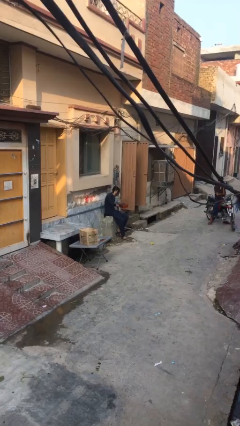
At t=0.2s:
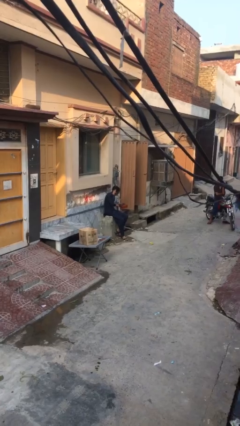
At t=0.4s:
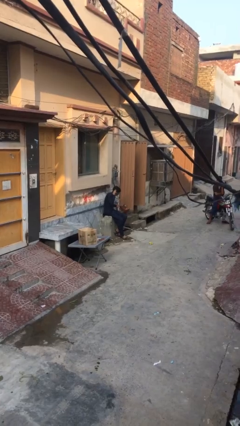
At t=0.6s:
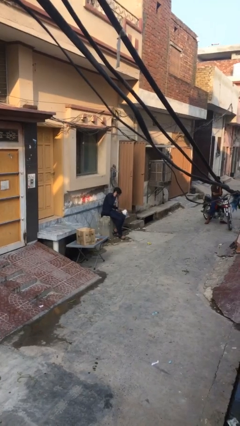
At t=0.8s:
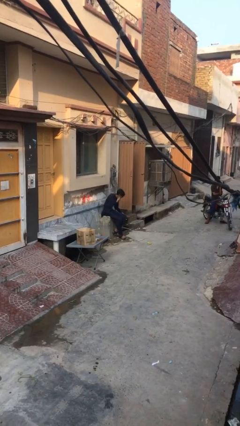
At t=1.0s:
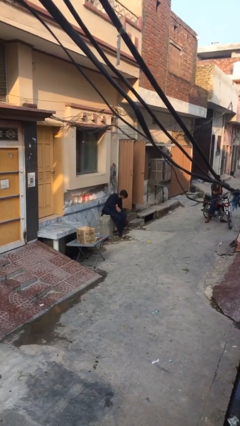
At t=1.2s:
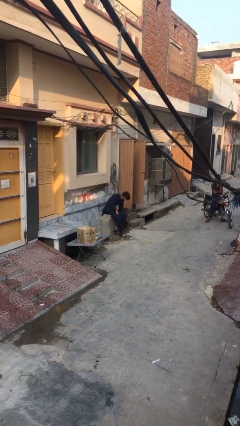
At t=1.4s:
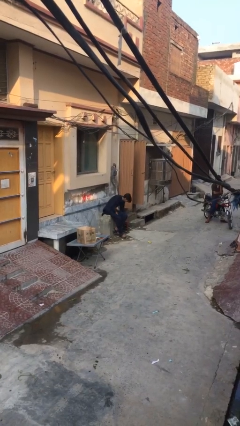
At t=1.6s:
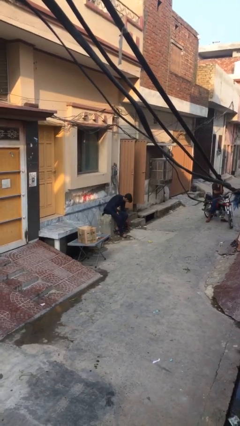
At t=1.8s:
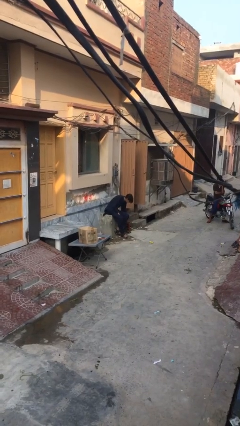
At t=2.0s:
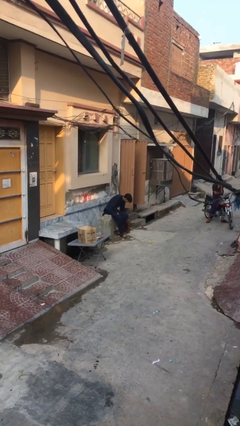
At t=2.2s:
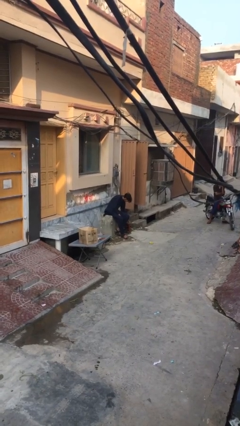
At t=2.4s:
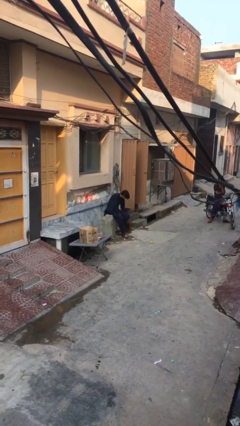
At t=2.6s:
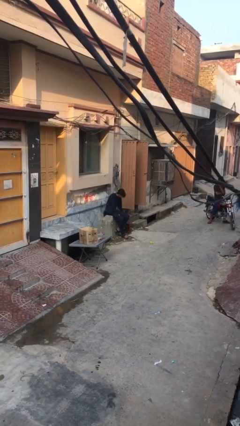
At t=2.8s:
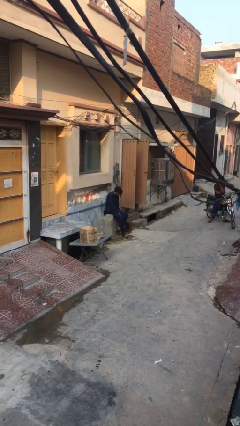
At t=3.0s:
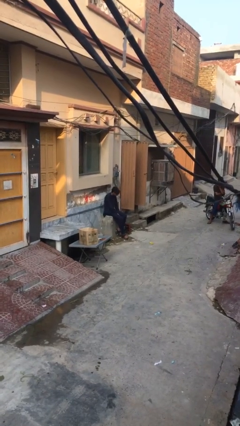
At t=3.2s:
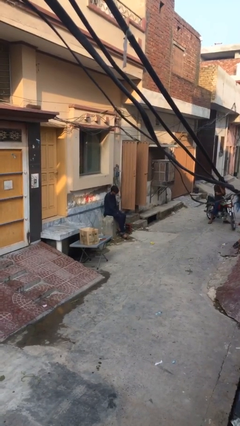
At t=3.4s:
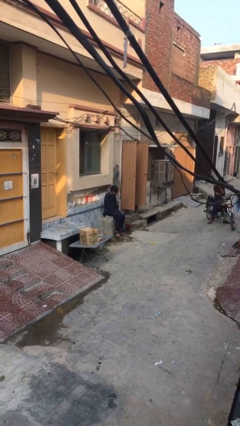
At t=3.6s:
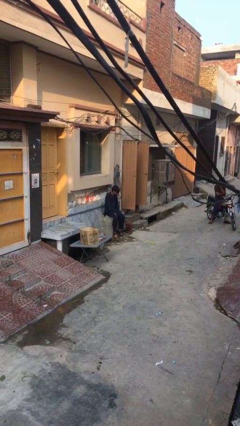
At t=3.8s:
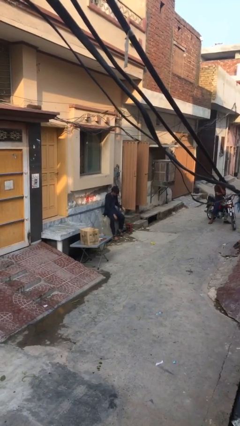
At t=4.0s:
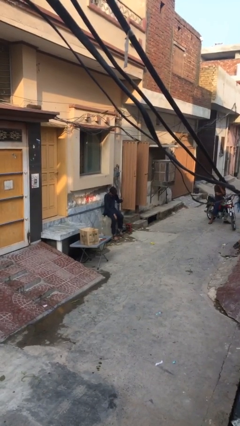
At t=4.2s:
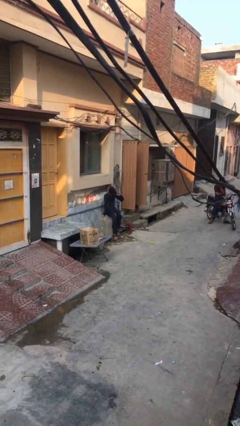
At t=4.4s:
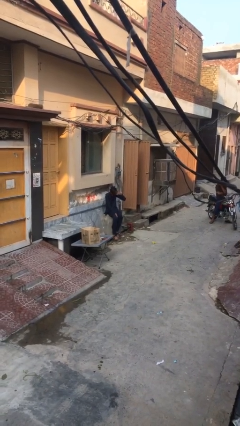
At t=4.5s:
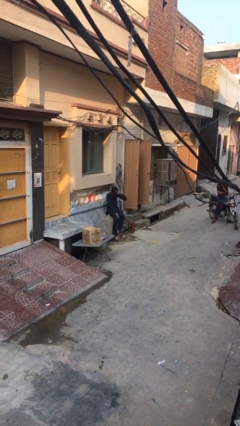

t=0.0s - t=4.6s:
person puts down object on floor

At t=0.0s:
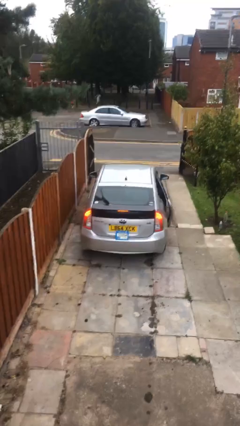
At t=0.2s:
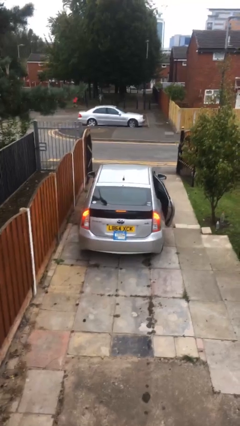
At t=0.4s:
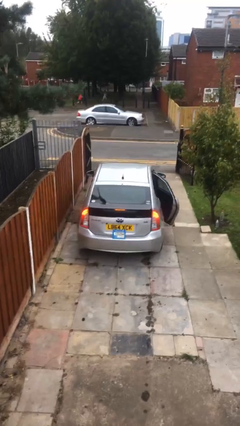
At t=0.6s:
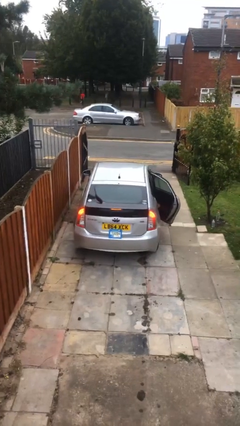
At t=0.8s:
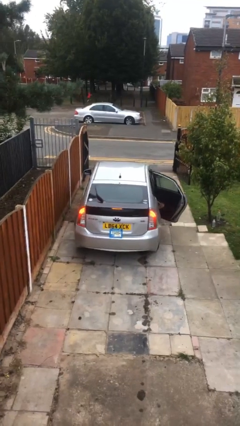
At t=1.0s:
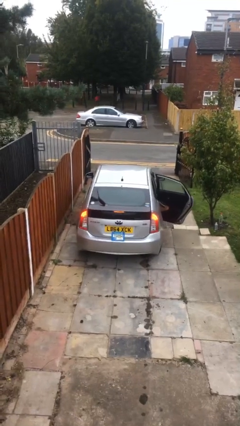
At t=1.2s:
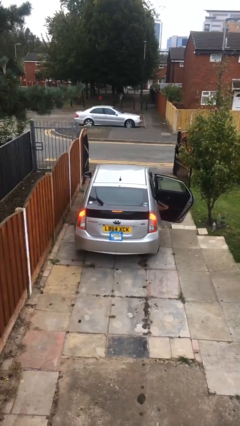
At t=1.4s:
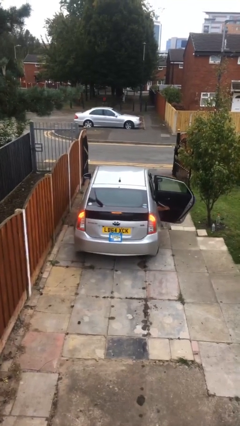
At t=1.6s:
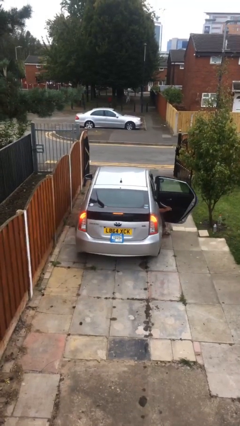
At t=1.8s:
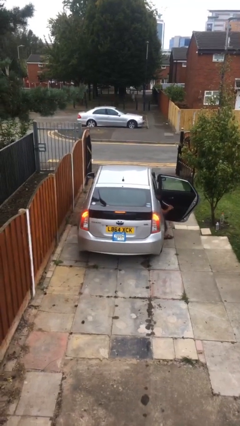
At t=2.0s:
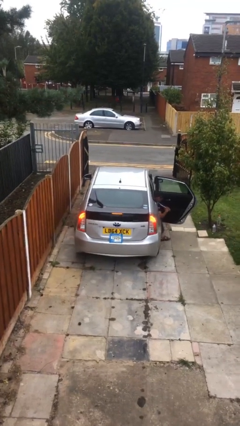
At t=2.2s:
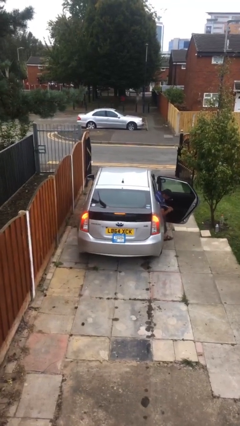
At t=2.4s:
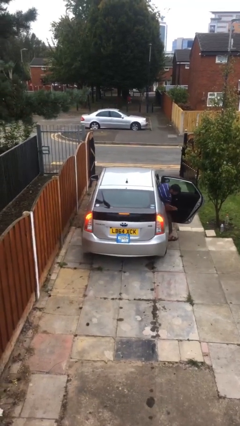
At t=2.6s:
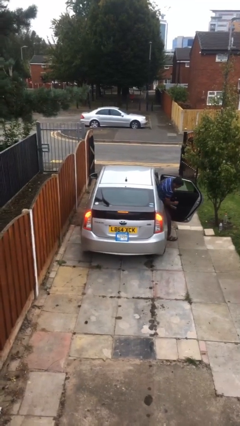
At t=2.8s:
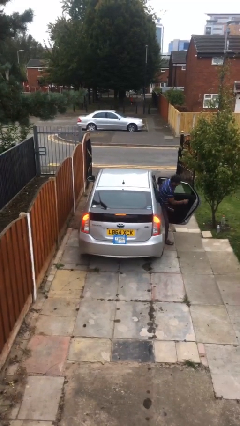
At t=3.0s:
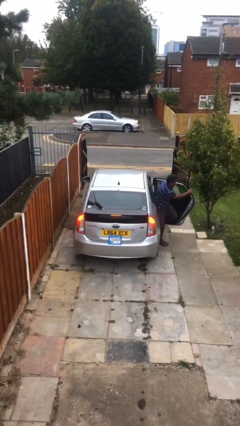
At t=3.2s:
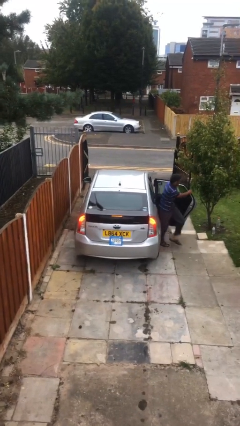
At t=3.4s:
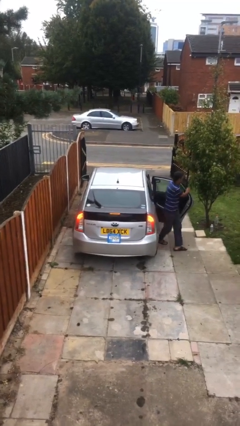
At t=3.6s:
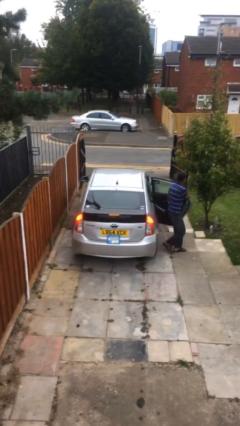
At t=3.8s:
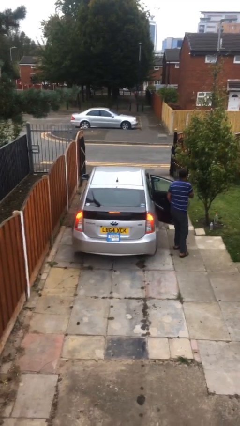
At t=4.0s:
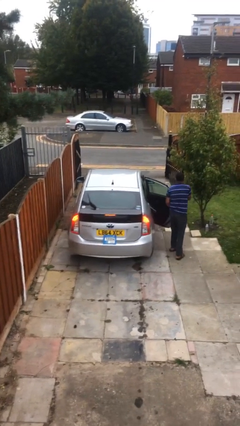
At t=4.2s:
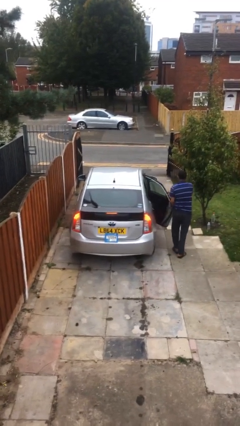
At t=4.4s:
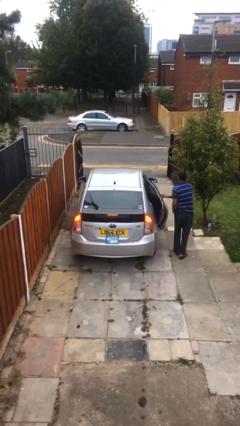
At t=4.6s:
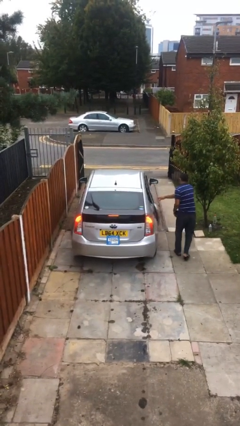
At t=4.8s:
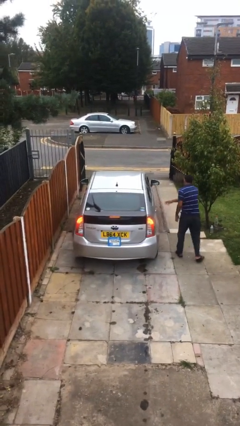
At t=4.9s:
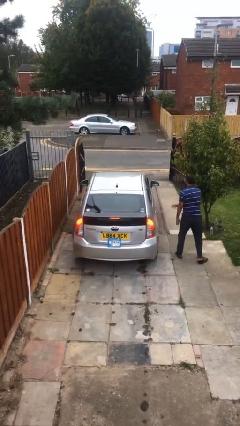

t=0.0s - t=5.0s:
car drops off person

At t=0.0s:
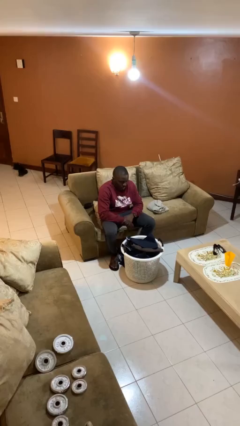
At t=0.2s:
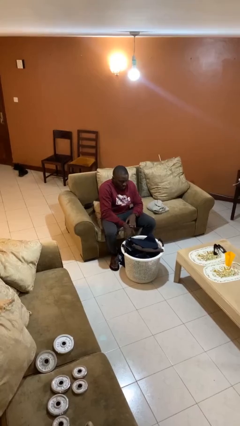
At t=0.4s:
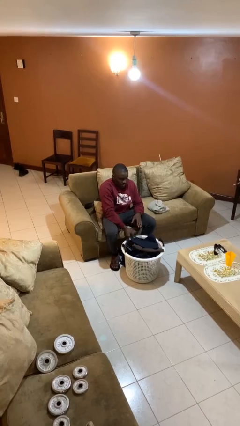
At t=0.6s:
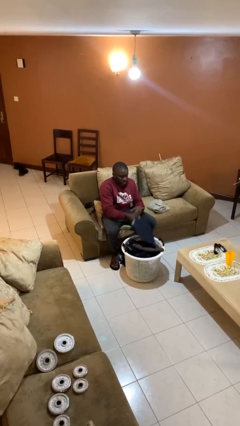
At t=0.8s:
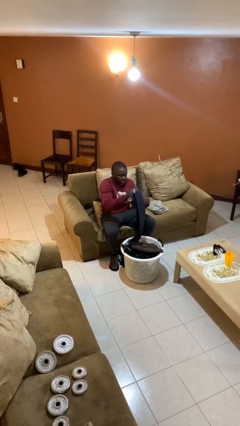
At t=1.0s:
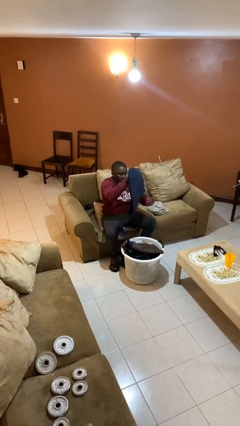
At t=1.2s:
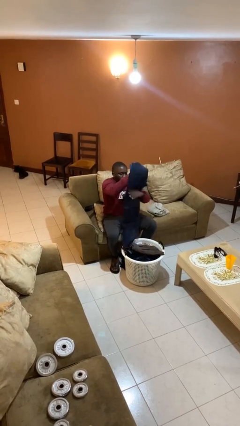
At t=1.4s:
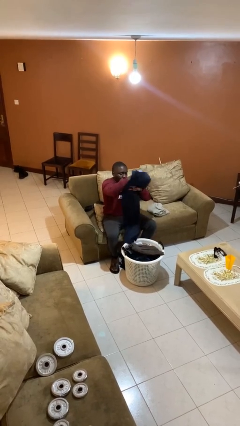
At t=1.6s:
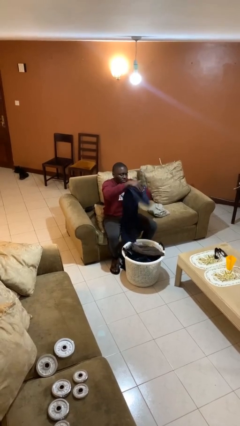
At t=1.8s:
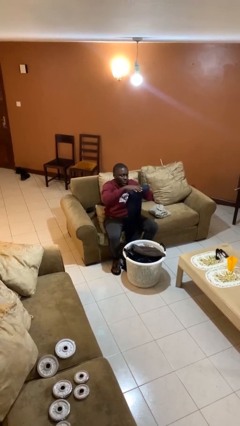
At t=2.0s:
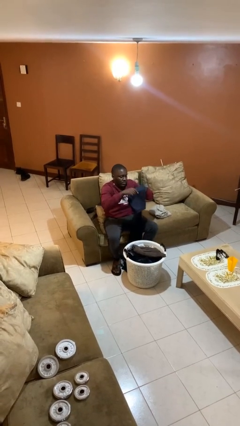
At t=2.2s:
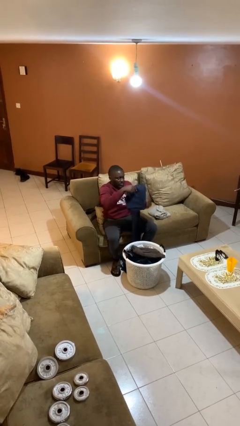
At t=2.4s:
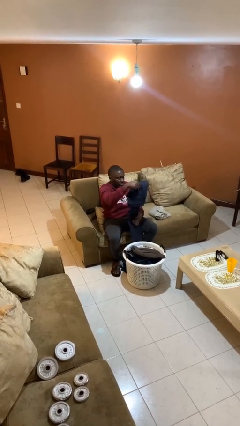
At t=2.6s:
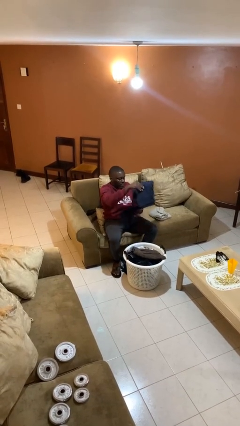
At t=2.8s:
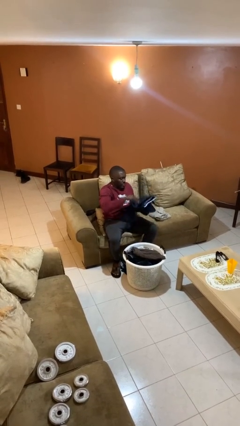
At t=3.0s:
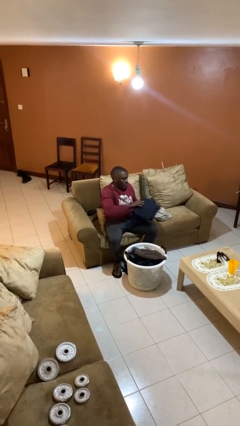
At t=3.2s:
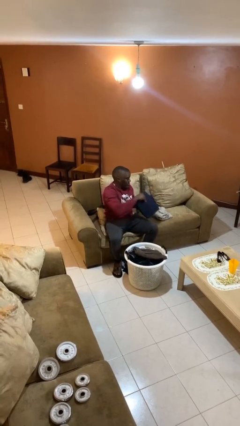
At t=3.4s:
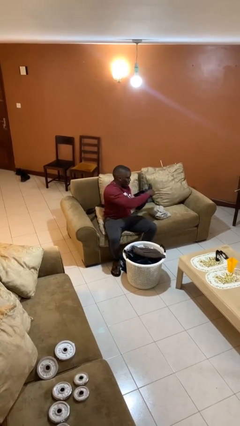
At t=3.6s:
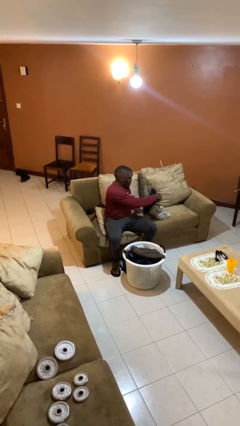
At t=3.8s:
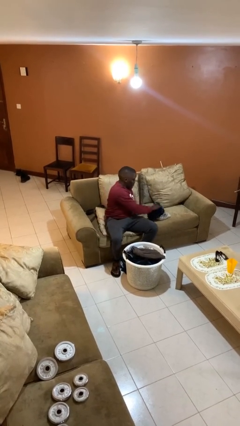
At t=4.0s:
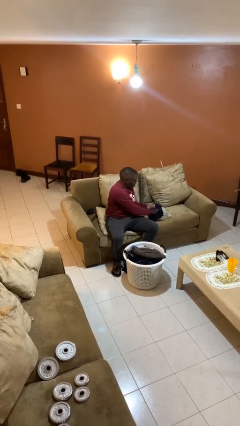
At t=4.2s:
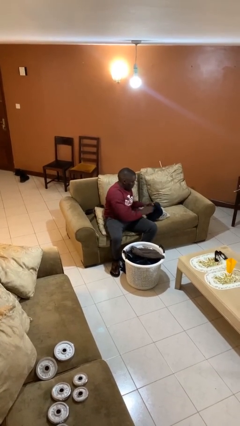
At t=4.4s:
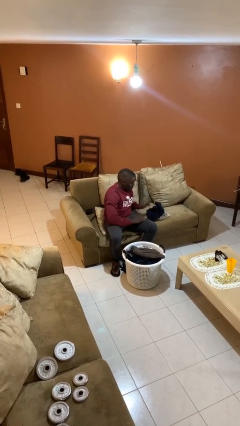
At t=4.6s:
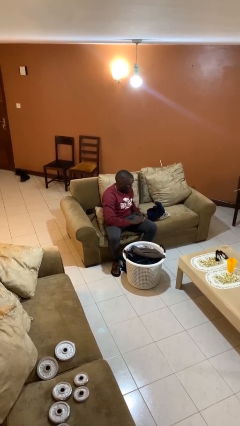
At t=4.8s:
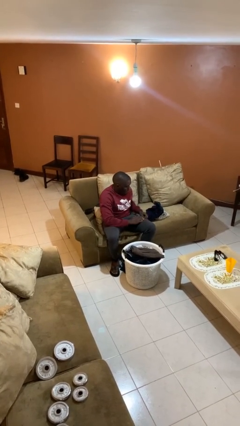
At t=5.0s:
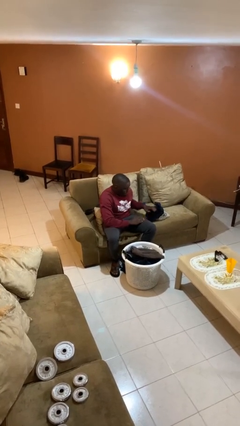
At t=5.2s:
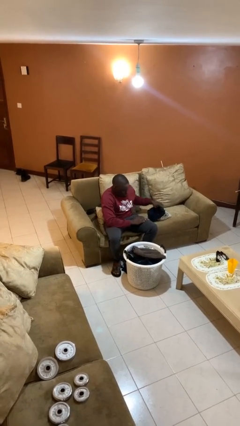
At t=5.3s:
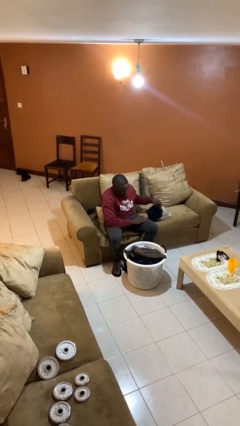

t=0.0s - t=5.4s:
person folds pants

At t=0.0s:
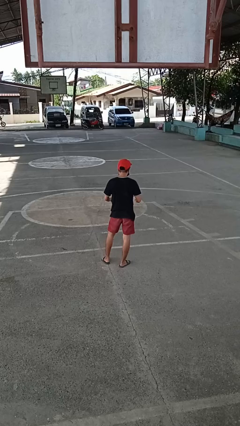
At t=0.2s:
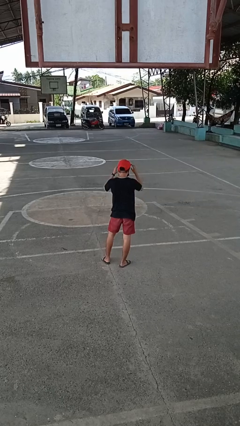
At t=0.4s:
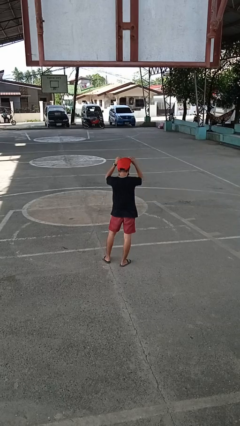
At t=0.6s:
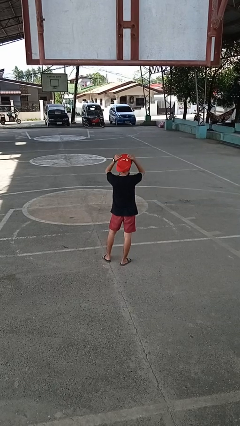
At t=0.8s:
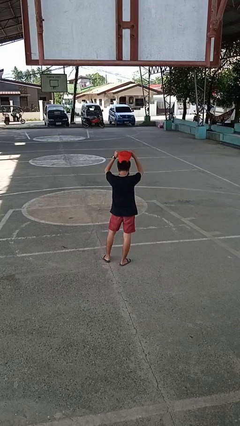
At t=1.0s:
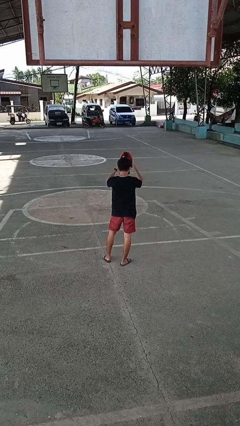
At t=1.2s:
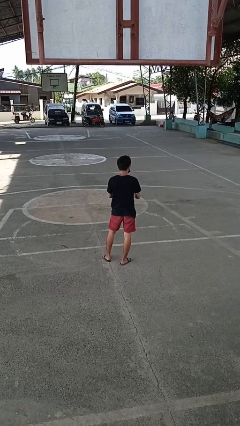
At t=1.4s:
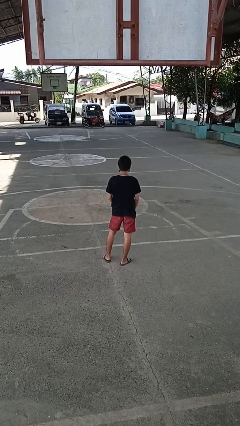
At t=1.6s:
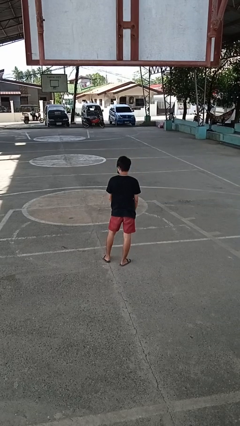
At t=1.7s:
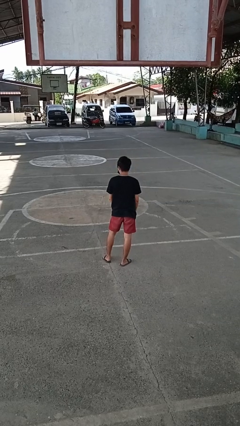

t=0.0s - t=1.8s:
person takes off hat

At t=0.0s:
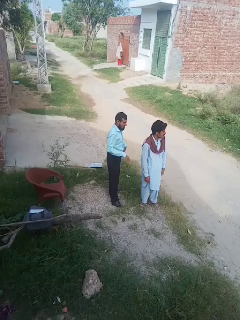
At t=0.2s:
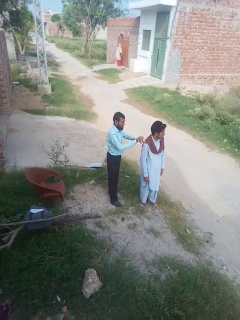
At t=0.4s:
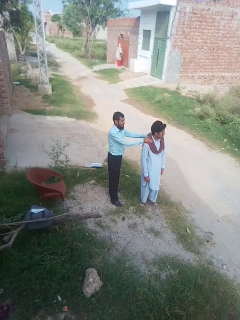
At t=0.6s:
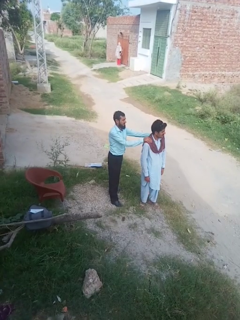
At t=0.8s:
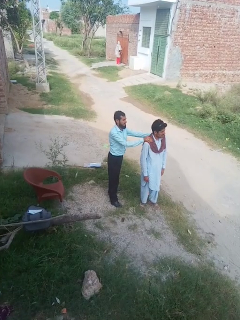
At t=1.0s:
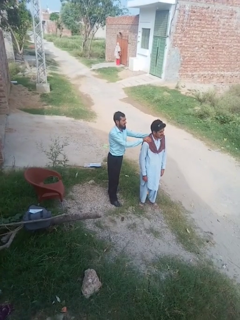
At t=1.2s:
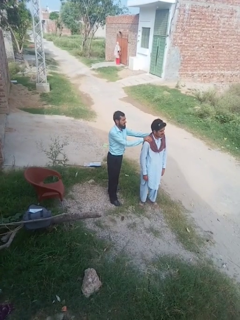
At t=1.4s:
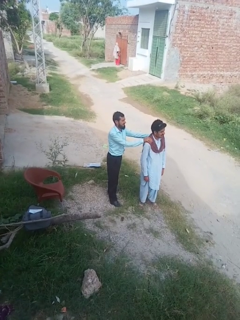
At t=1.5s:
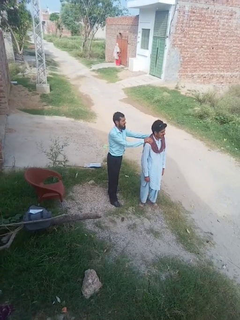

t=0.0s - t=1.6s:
person grabs person by shoulder
